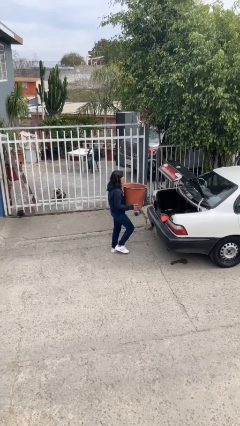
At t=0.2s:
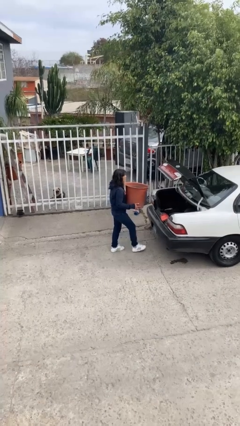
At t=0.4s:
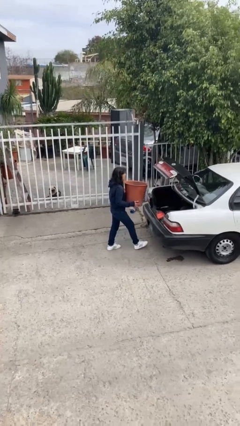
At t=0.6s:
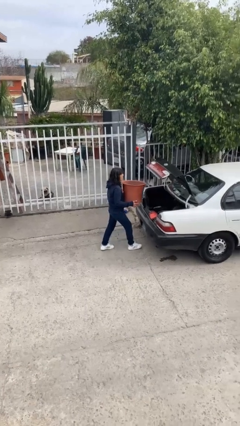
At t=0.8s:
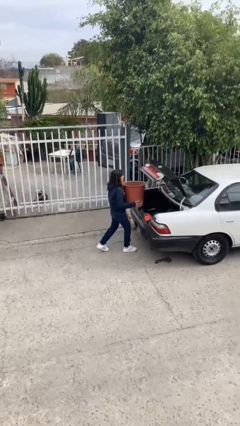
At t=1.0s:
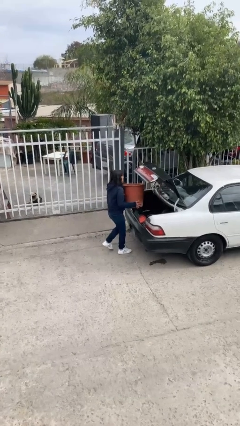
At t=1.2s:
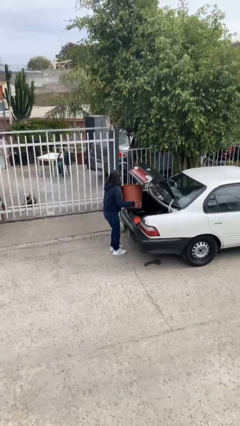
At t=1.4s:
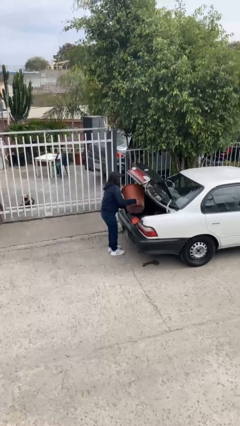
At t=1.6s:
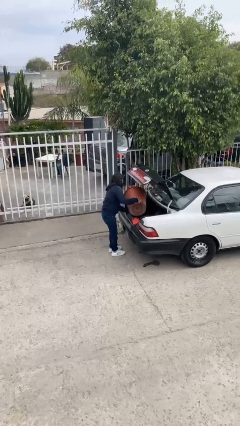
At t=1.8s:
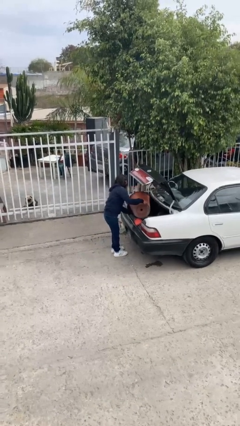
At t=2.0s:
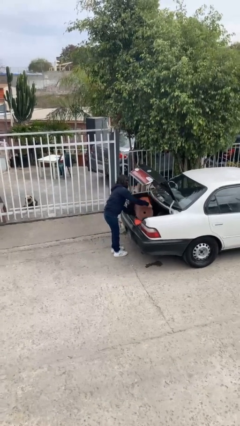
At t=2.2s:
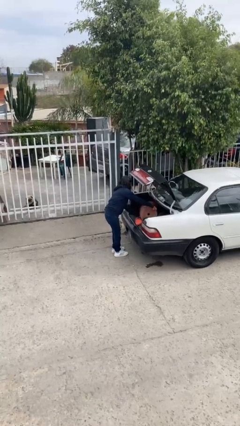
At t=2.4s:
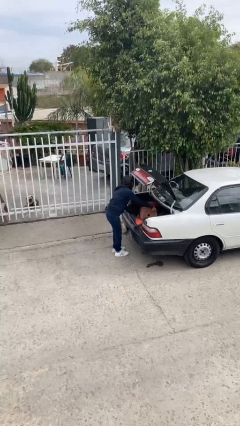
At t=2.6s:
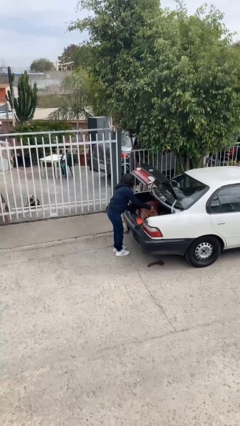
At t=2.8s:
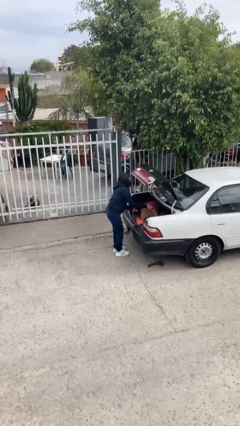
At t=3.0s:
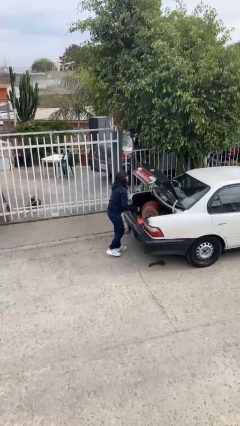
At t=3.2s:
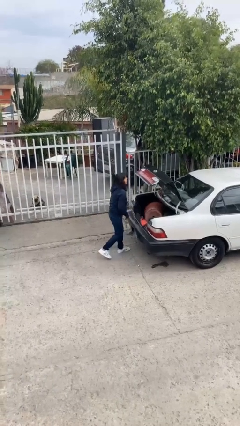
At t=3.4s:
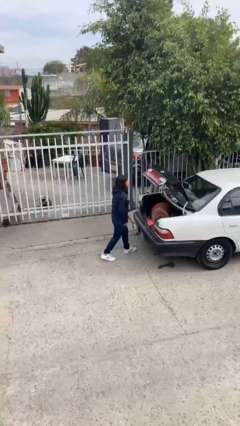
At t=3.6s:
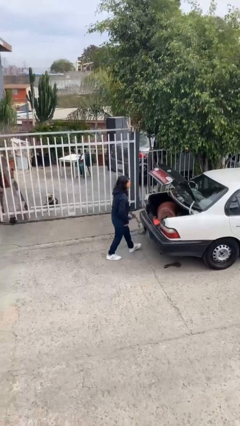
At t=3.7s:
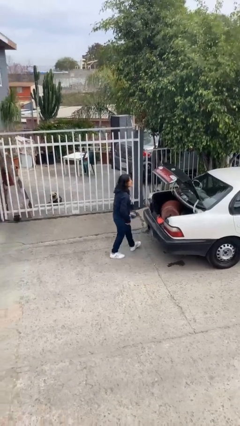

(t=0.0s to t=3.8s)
person loads car

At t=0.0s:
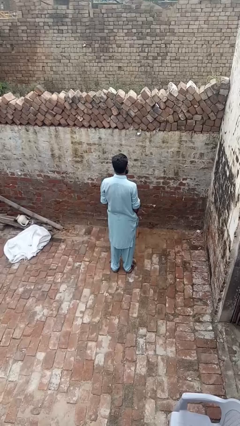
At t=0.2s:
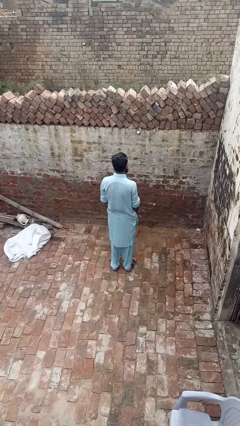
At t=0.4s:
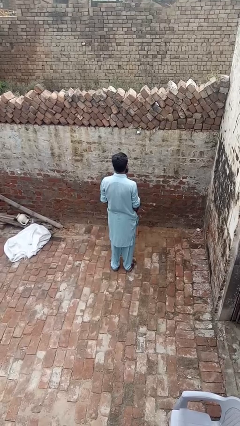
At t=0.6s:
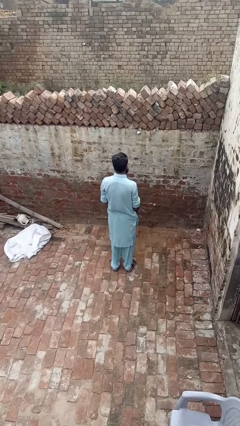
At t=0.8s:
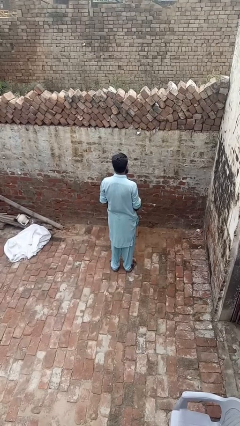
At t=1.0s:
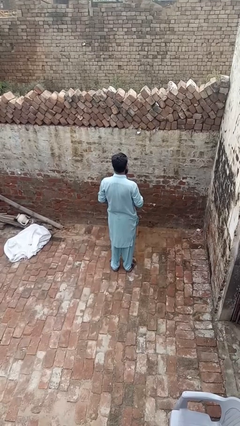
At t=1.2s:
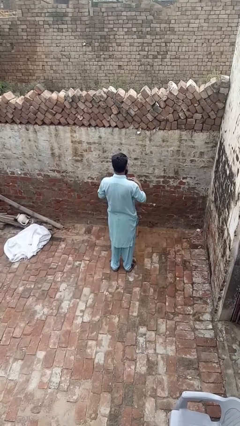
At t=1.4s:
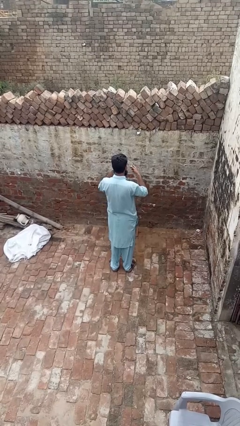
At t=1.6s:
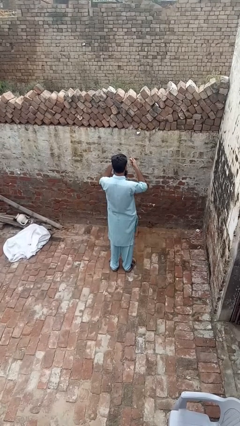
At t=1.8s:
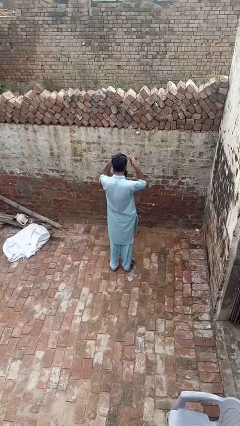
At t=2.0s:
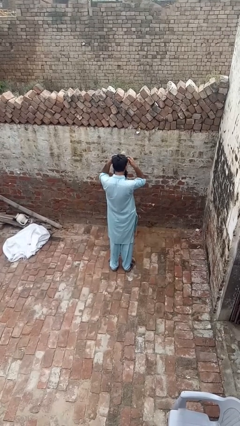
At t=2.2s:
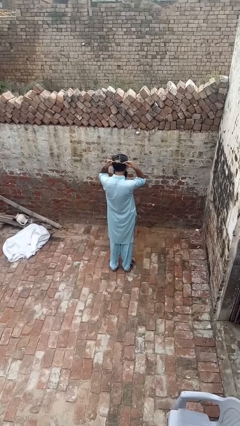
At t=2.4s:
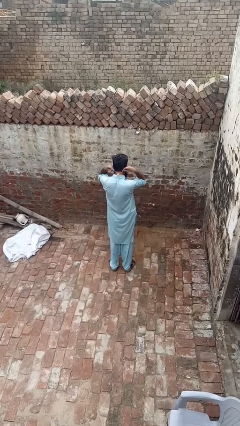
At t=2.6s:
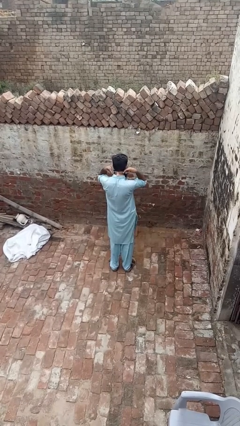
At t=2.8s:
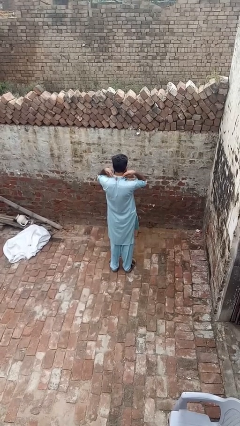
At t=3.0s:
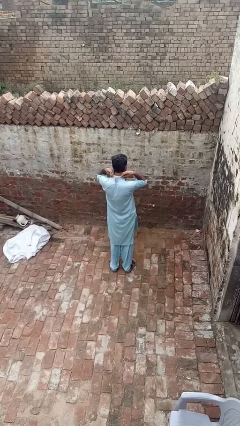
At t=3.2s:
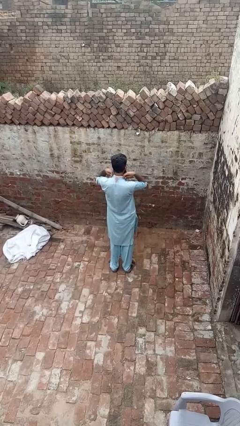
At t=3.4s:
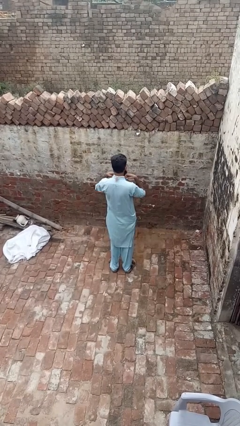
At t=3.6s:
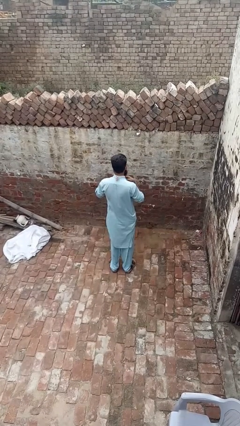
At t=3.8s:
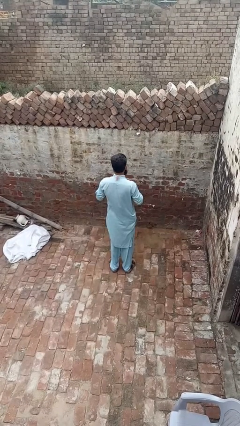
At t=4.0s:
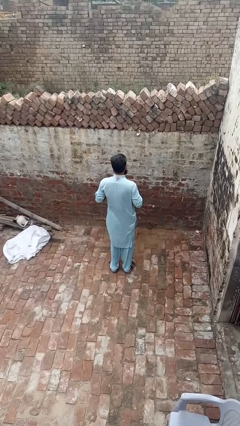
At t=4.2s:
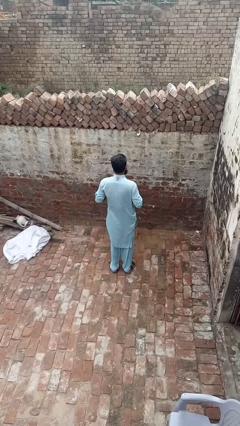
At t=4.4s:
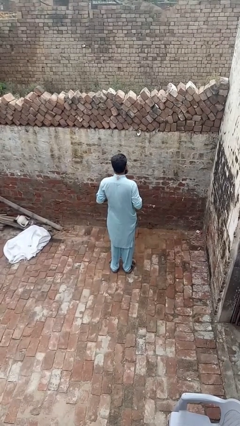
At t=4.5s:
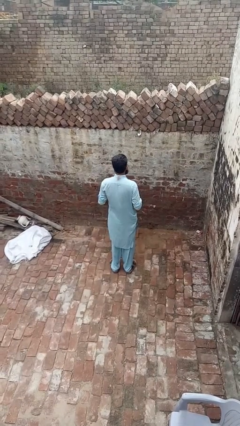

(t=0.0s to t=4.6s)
person puts on necklace

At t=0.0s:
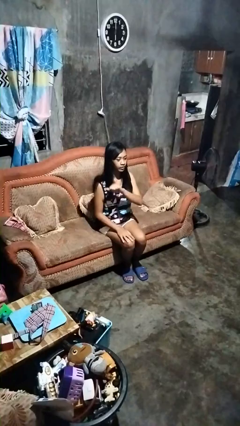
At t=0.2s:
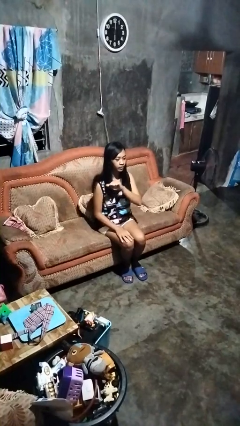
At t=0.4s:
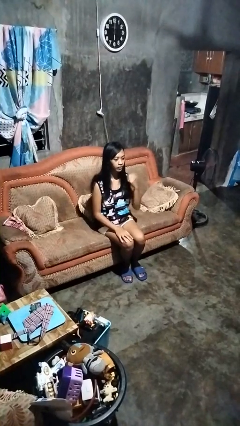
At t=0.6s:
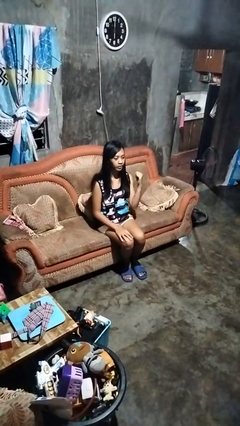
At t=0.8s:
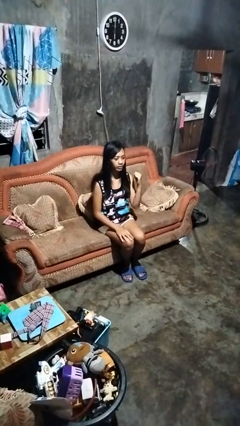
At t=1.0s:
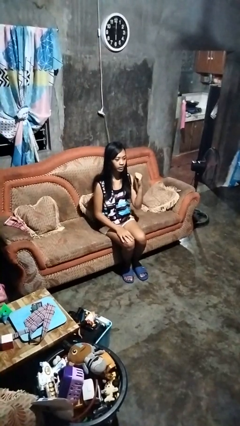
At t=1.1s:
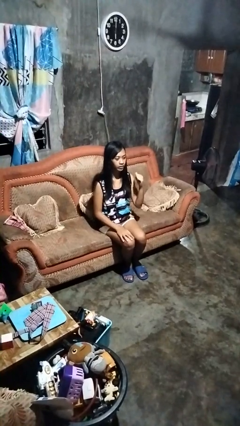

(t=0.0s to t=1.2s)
person gestures cut

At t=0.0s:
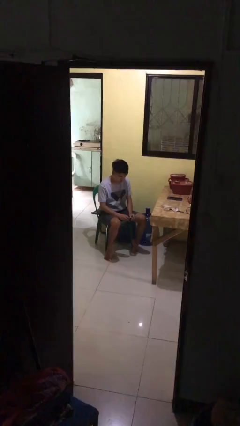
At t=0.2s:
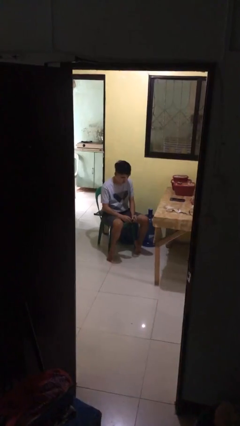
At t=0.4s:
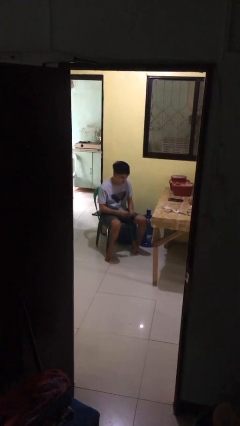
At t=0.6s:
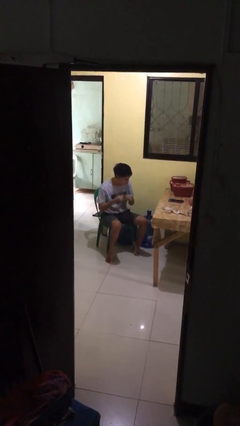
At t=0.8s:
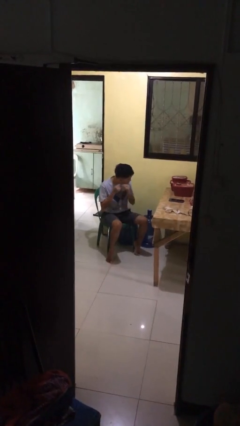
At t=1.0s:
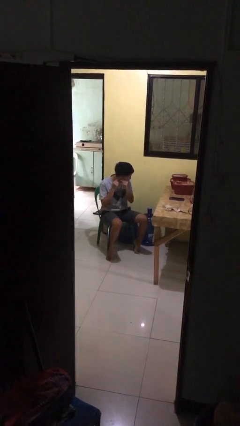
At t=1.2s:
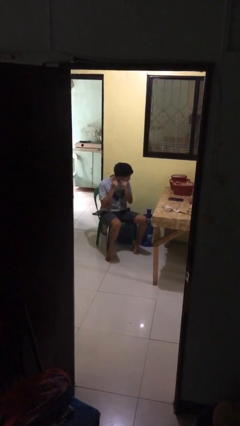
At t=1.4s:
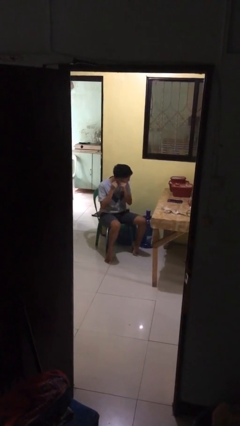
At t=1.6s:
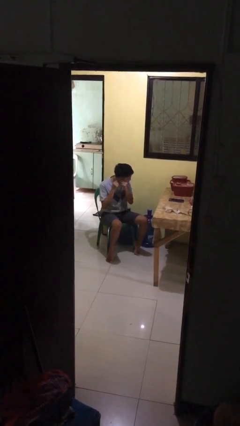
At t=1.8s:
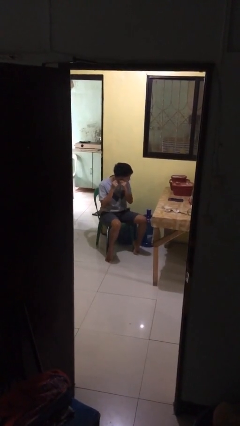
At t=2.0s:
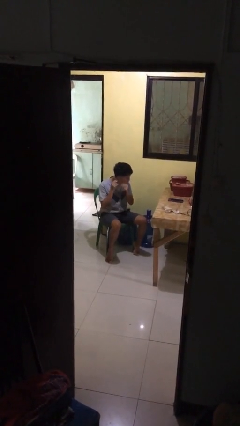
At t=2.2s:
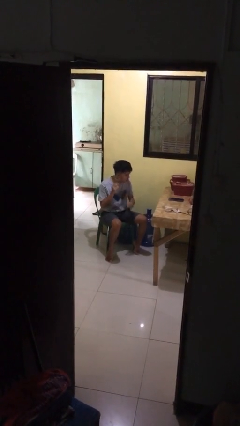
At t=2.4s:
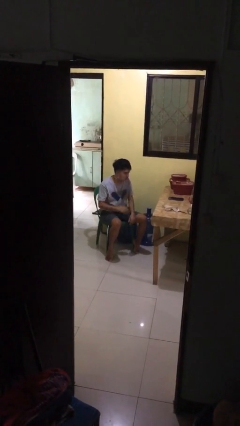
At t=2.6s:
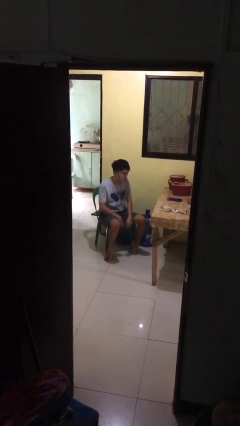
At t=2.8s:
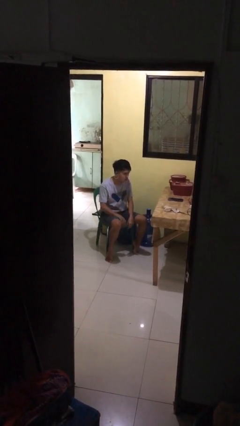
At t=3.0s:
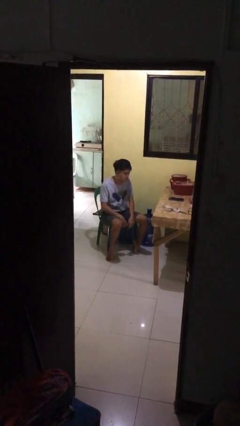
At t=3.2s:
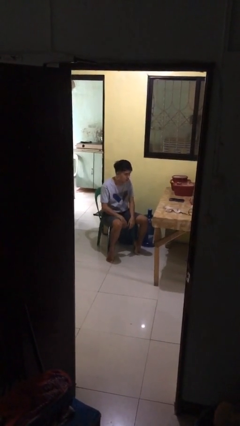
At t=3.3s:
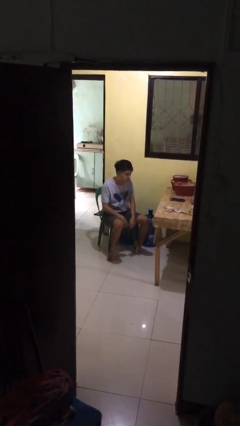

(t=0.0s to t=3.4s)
person puts on earrings

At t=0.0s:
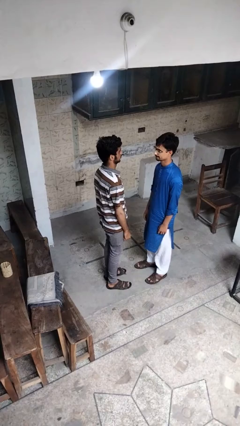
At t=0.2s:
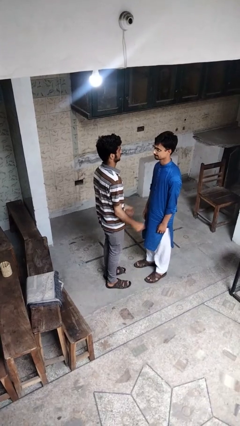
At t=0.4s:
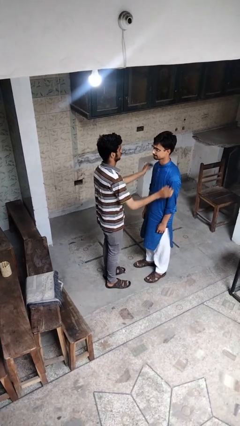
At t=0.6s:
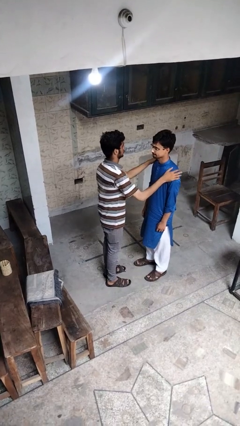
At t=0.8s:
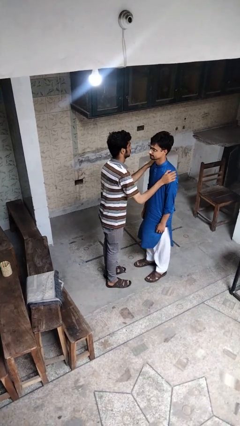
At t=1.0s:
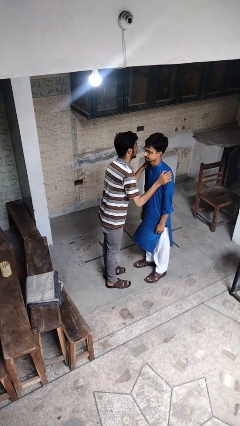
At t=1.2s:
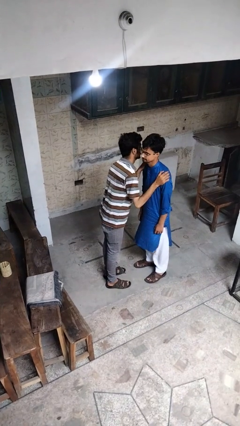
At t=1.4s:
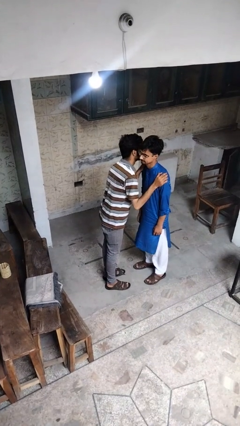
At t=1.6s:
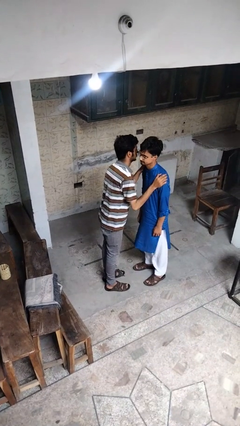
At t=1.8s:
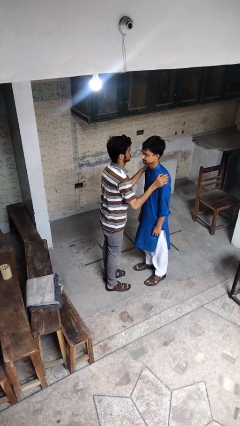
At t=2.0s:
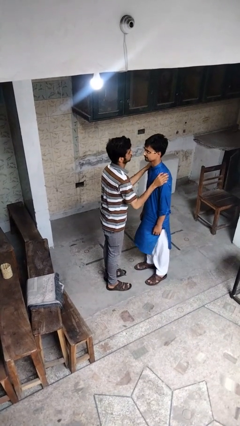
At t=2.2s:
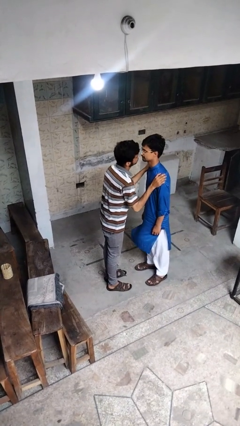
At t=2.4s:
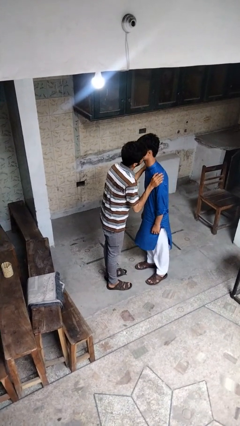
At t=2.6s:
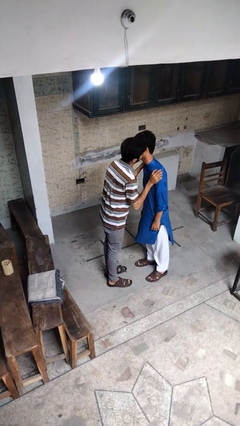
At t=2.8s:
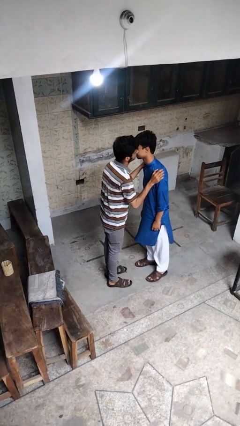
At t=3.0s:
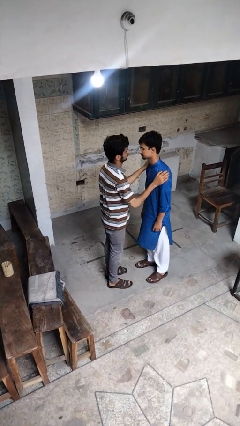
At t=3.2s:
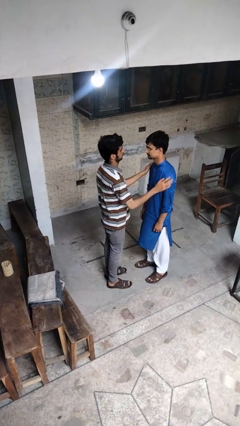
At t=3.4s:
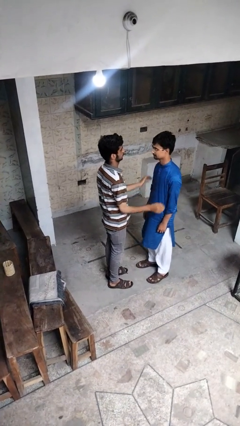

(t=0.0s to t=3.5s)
person kisses cheek of person

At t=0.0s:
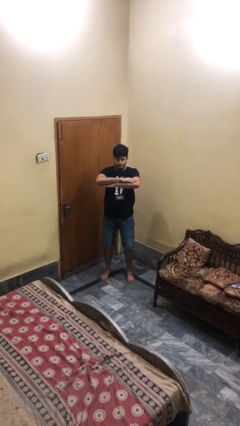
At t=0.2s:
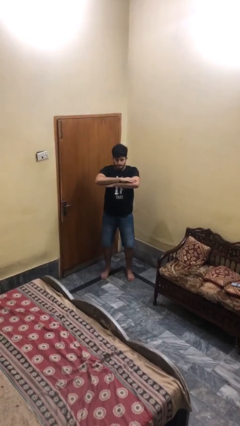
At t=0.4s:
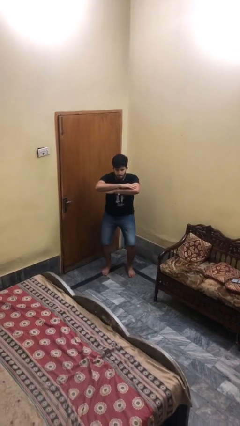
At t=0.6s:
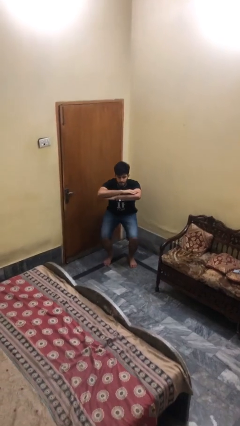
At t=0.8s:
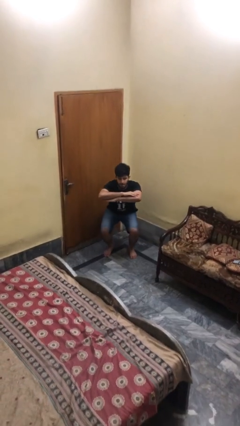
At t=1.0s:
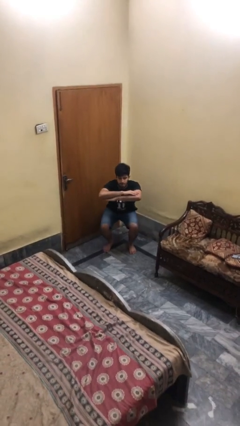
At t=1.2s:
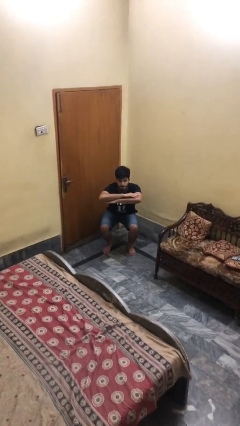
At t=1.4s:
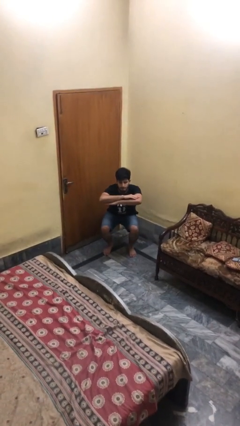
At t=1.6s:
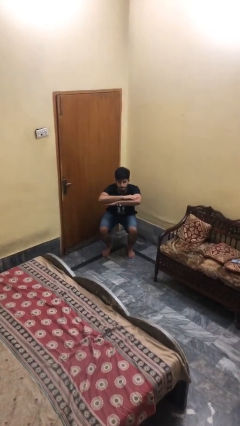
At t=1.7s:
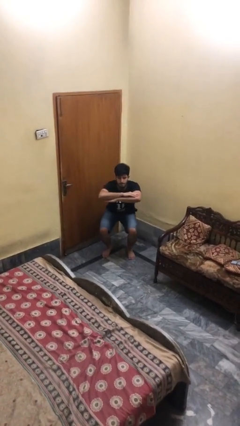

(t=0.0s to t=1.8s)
person squats
